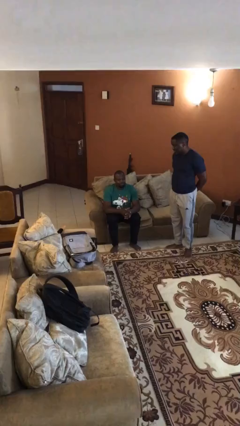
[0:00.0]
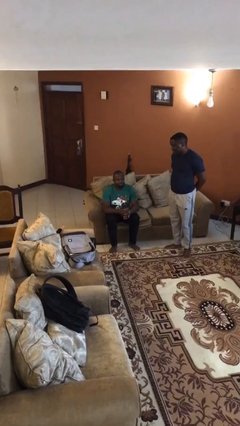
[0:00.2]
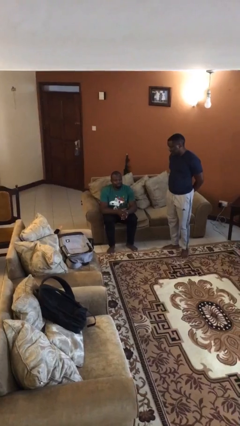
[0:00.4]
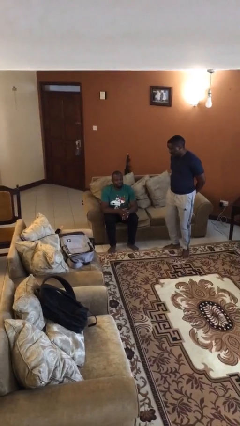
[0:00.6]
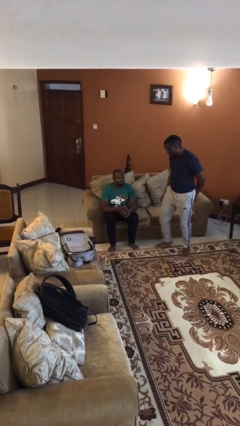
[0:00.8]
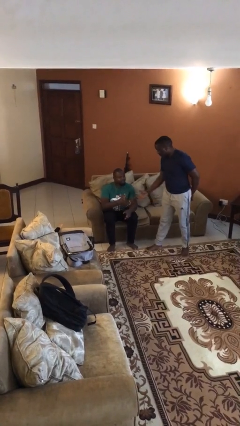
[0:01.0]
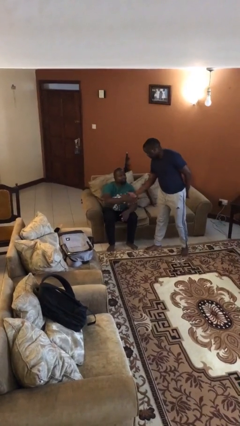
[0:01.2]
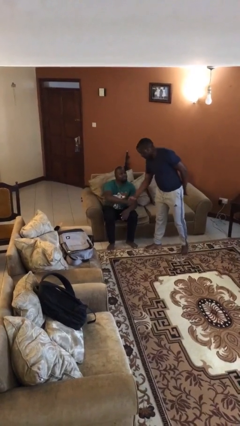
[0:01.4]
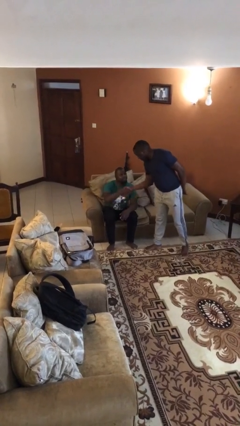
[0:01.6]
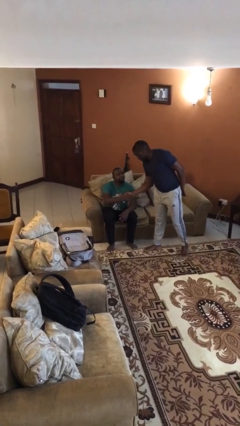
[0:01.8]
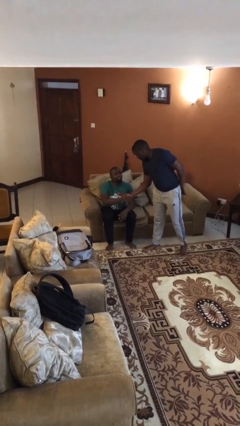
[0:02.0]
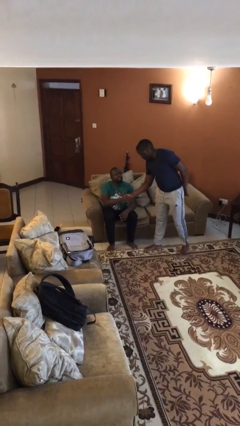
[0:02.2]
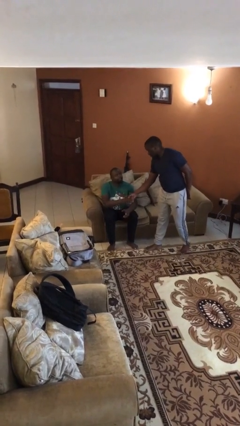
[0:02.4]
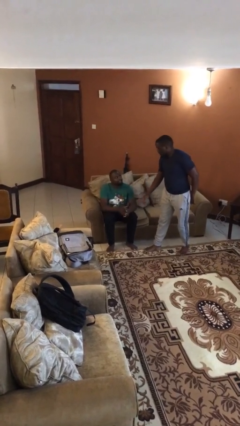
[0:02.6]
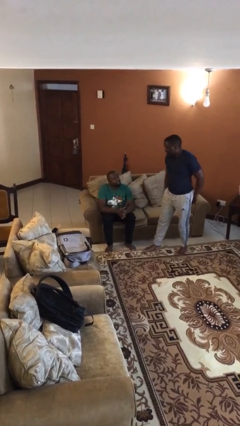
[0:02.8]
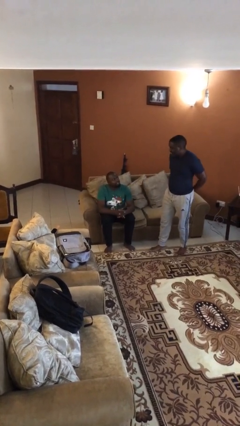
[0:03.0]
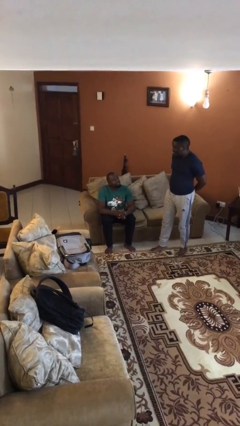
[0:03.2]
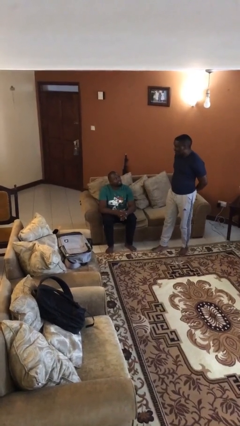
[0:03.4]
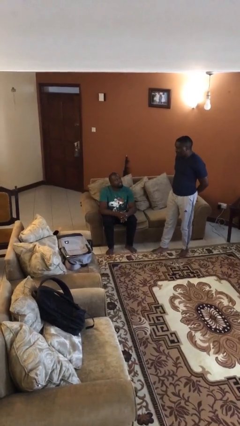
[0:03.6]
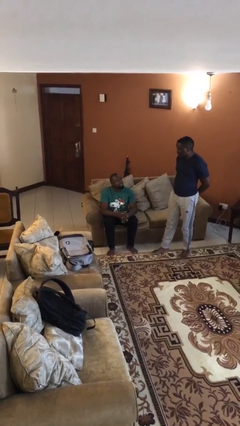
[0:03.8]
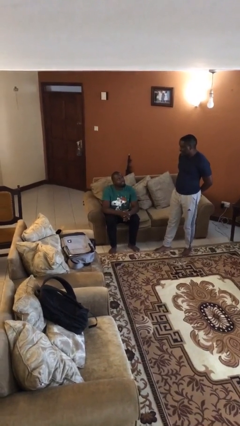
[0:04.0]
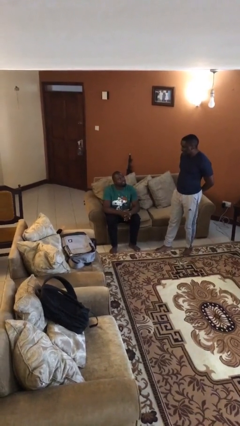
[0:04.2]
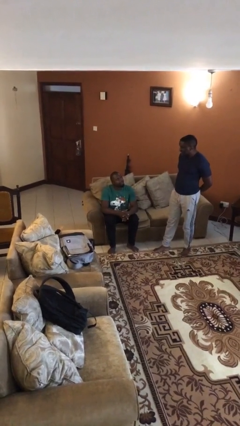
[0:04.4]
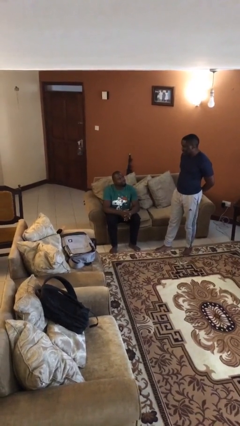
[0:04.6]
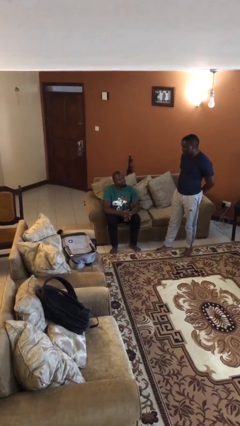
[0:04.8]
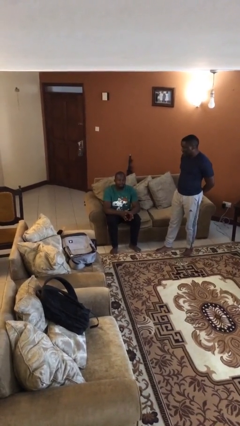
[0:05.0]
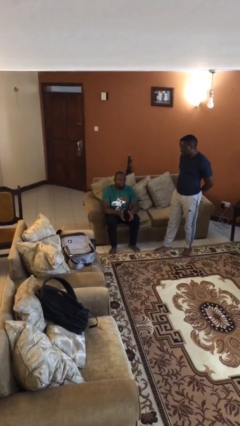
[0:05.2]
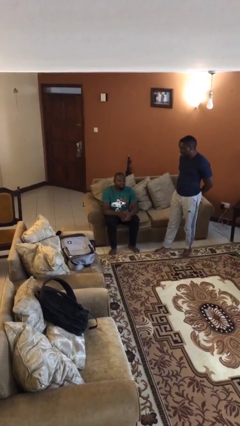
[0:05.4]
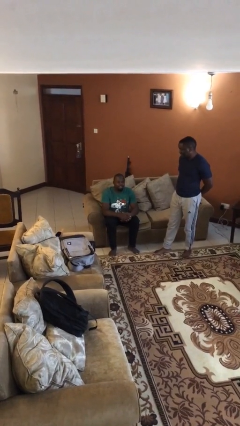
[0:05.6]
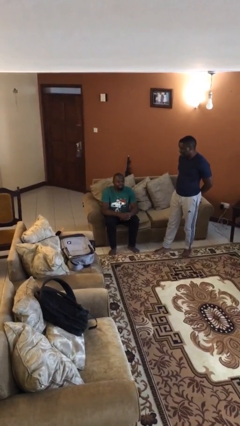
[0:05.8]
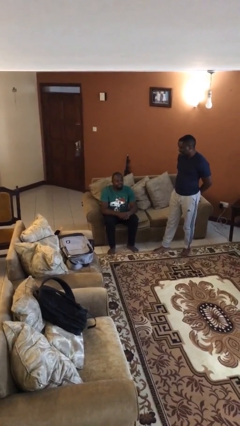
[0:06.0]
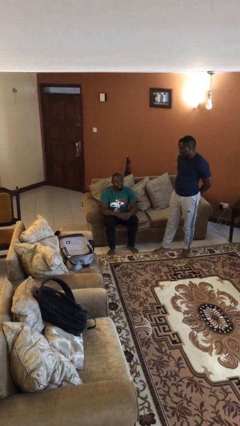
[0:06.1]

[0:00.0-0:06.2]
person shakes hand

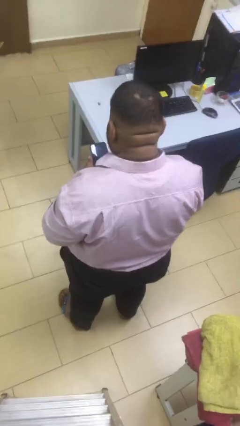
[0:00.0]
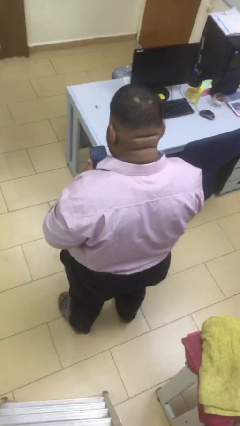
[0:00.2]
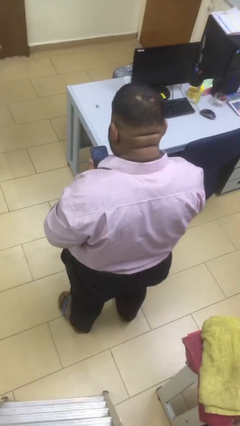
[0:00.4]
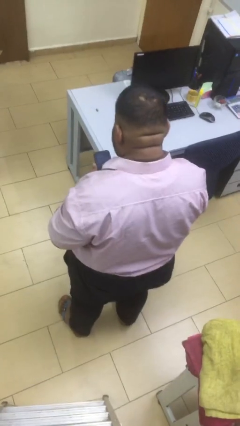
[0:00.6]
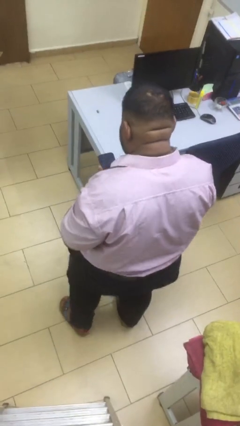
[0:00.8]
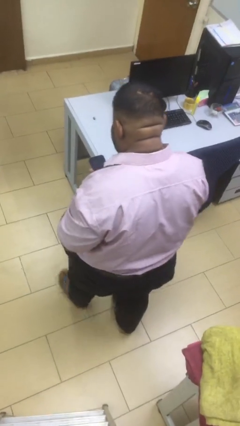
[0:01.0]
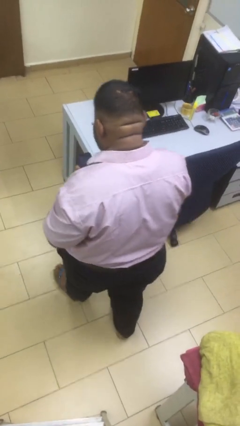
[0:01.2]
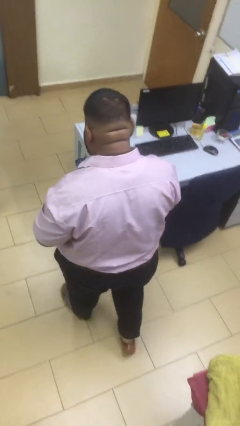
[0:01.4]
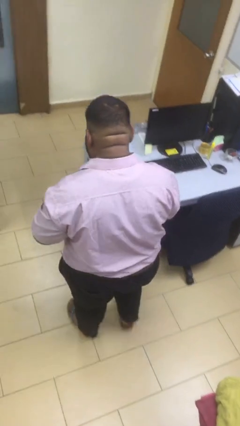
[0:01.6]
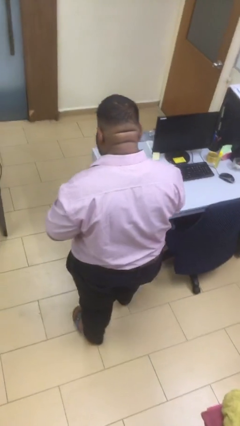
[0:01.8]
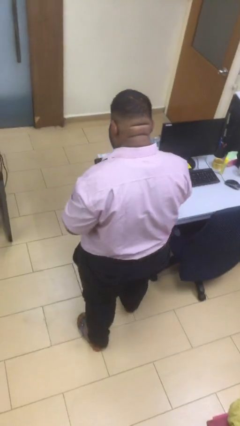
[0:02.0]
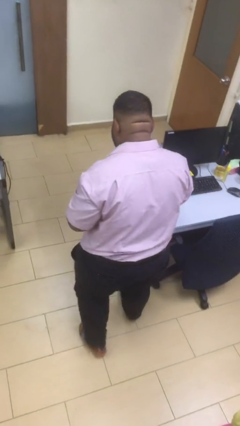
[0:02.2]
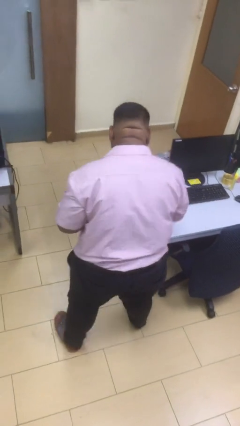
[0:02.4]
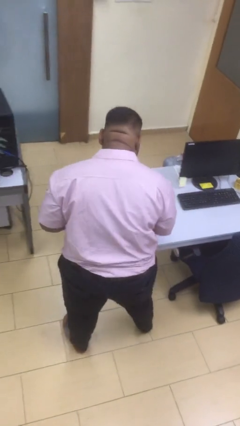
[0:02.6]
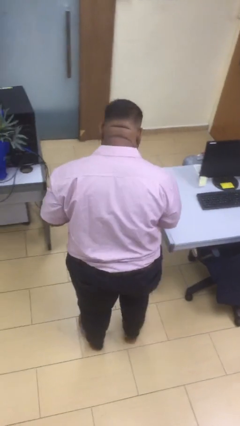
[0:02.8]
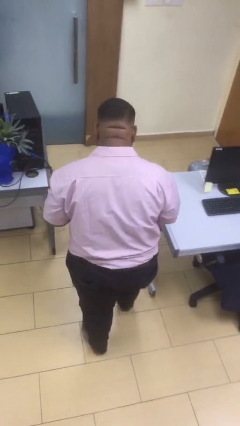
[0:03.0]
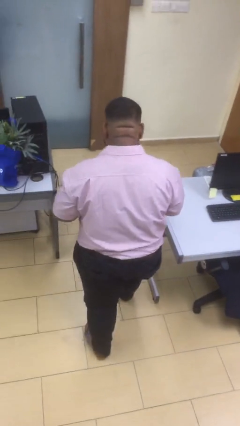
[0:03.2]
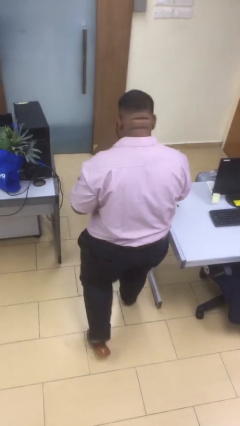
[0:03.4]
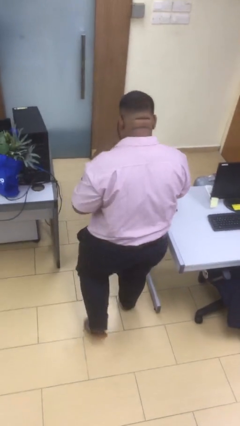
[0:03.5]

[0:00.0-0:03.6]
person bumps into table

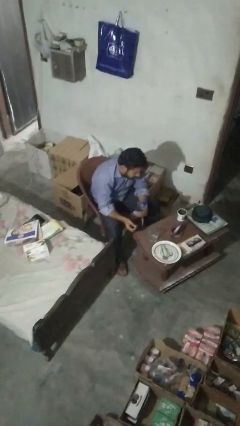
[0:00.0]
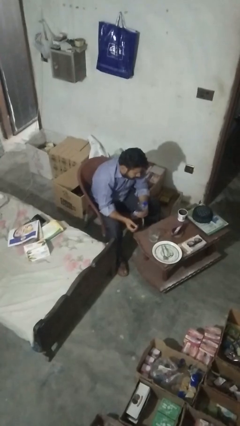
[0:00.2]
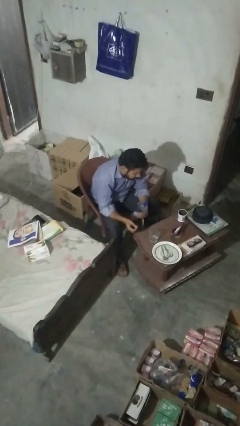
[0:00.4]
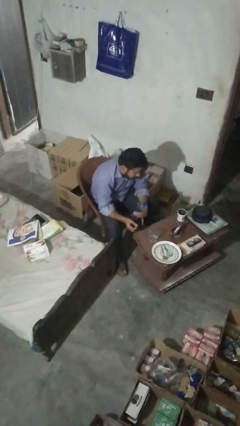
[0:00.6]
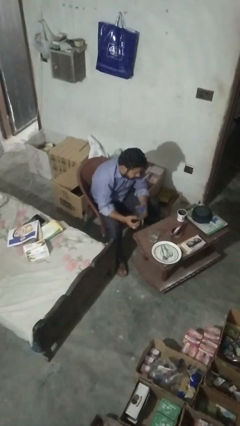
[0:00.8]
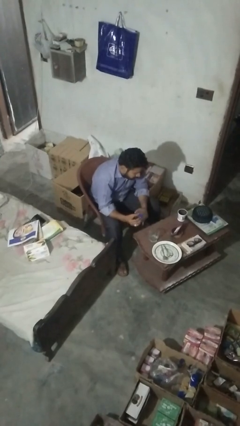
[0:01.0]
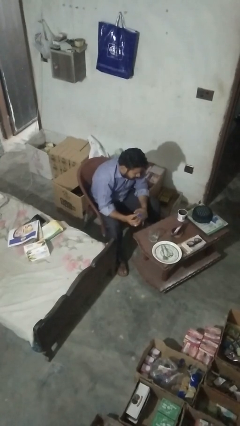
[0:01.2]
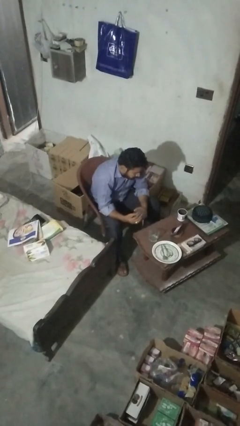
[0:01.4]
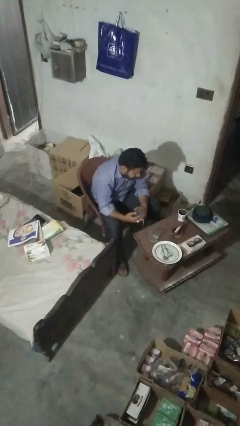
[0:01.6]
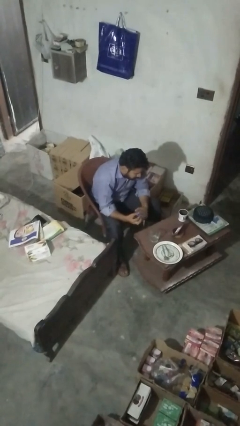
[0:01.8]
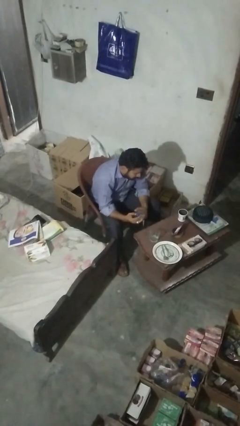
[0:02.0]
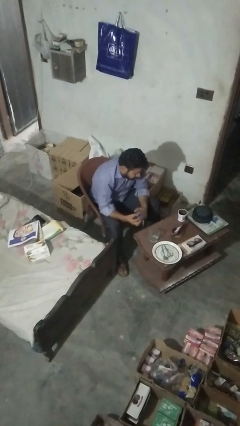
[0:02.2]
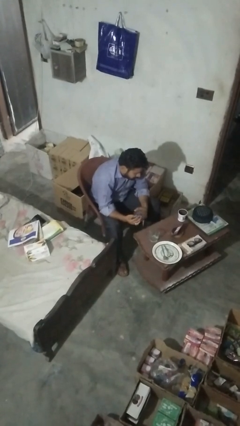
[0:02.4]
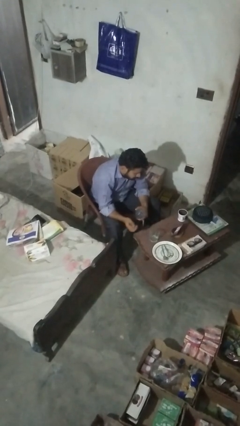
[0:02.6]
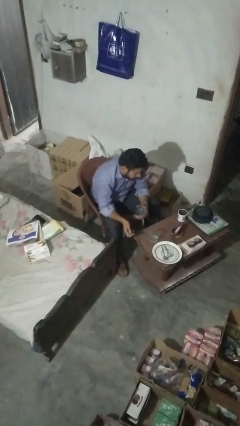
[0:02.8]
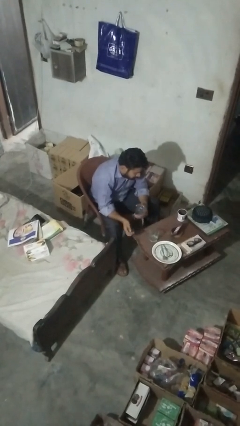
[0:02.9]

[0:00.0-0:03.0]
person unscrews lid from bottle

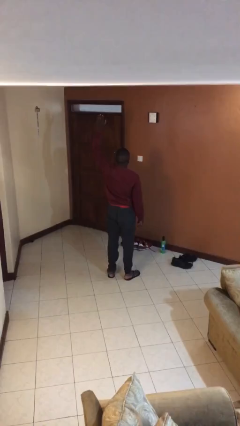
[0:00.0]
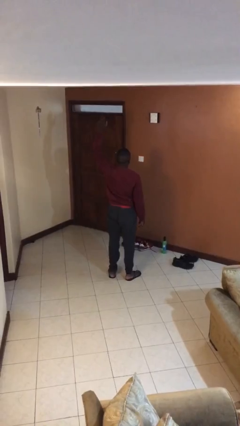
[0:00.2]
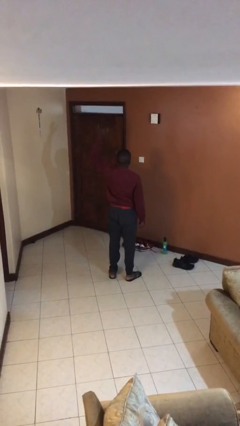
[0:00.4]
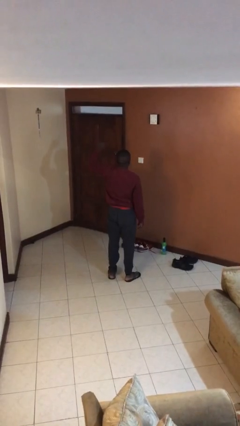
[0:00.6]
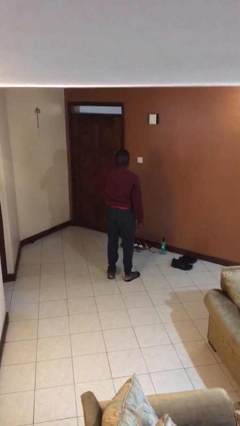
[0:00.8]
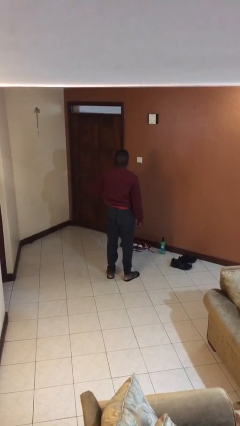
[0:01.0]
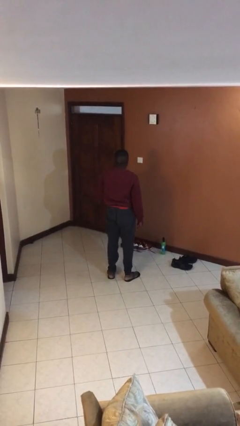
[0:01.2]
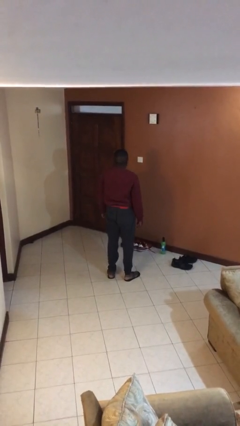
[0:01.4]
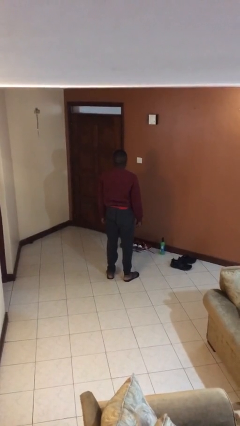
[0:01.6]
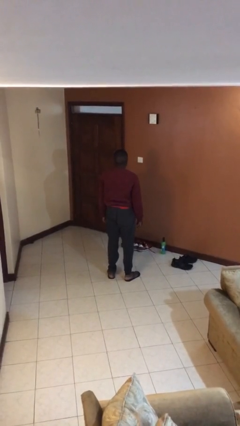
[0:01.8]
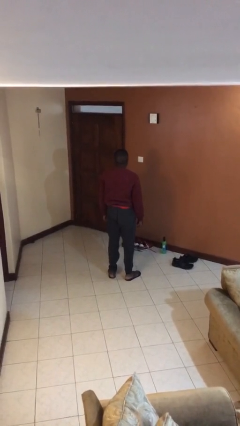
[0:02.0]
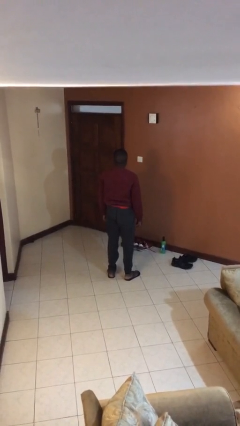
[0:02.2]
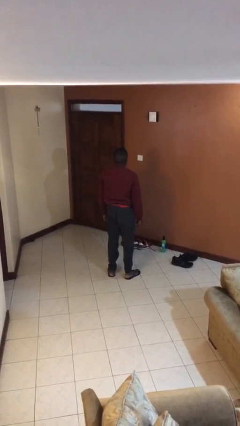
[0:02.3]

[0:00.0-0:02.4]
person gestures lower hand

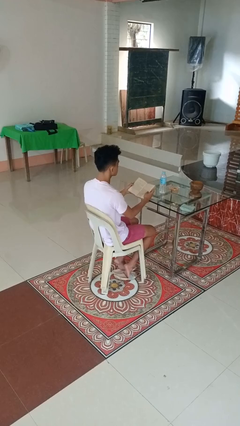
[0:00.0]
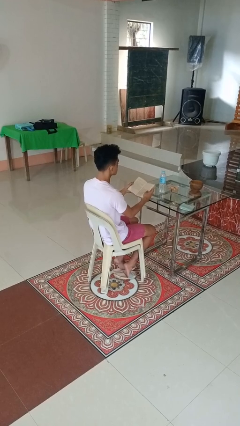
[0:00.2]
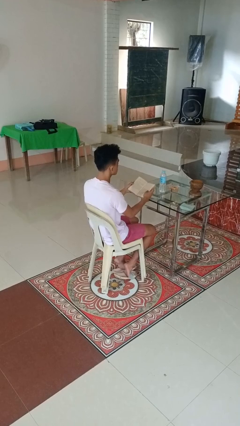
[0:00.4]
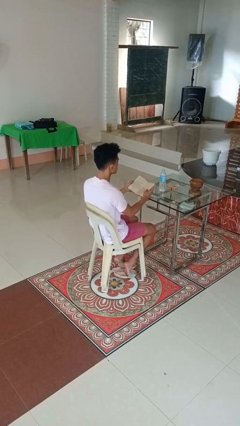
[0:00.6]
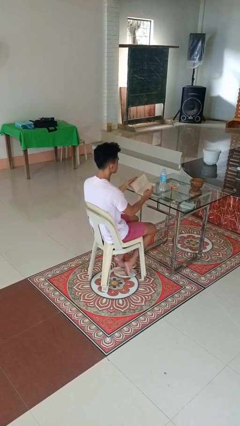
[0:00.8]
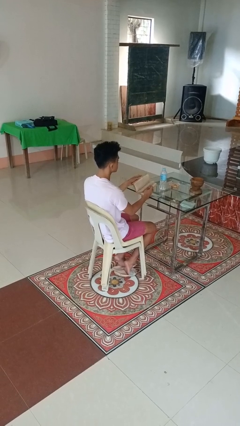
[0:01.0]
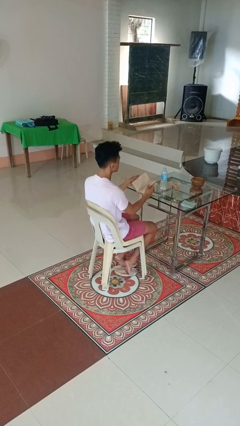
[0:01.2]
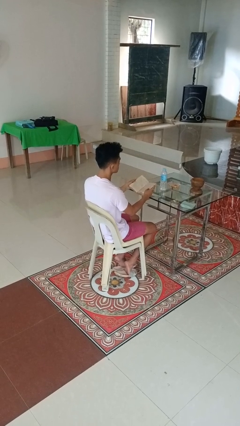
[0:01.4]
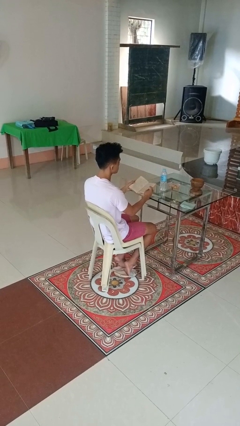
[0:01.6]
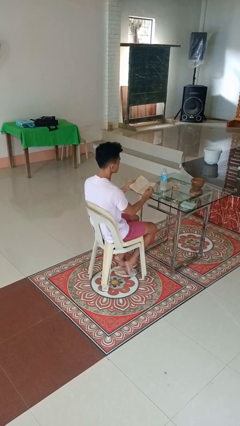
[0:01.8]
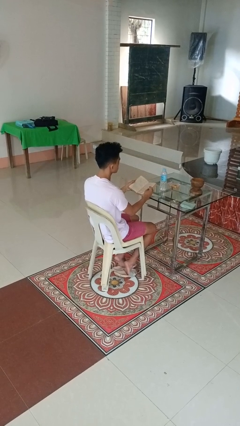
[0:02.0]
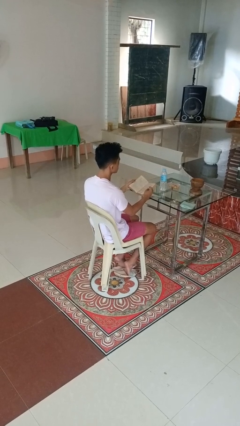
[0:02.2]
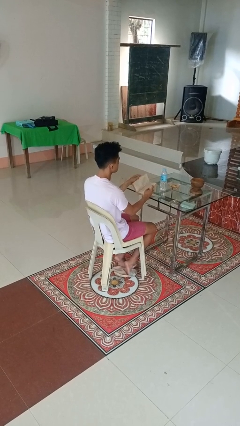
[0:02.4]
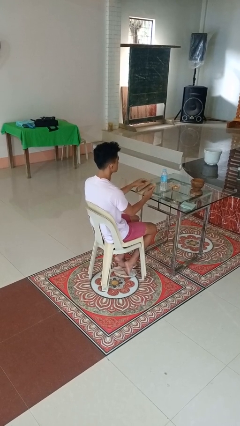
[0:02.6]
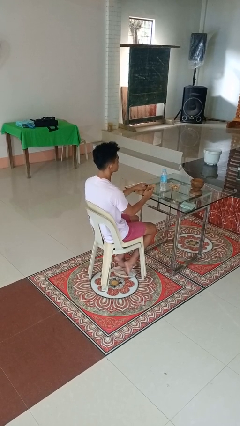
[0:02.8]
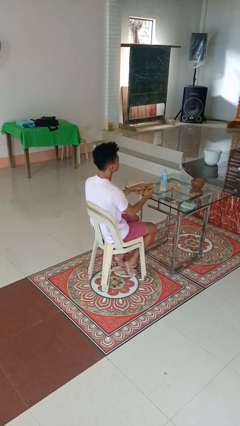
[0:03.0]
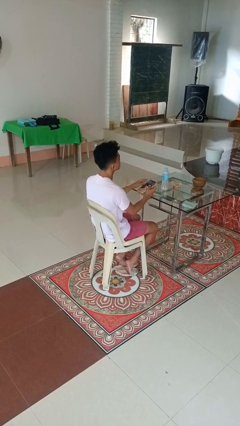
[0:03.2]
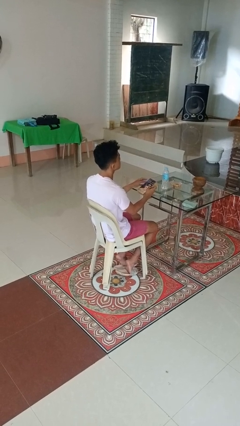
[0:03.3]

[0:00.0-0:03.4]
person reads book
